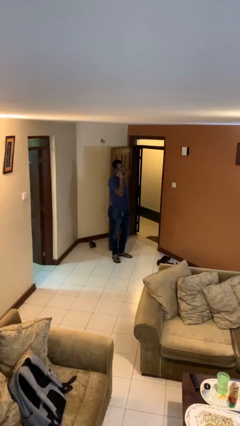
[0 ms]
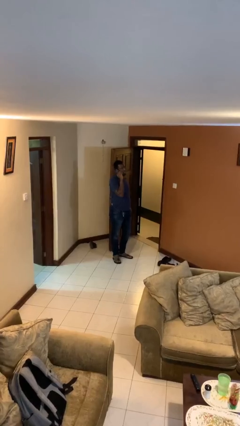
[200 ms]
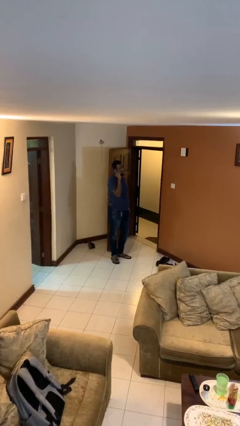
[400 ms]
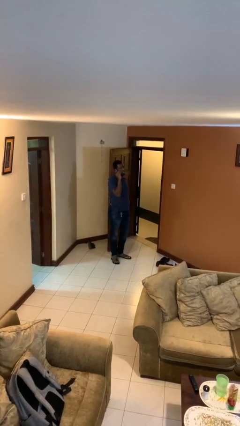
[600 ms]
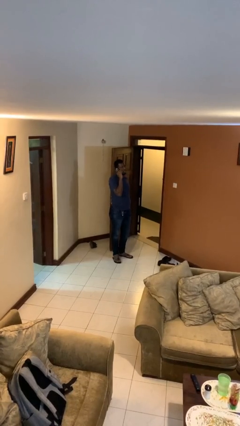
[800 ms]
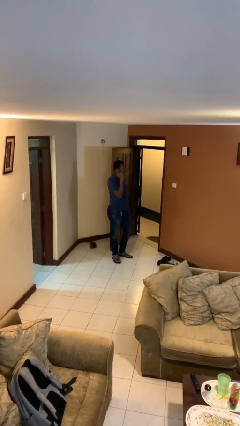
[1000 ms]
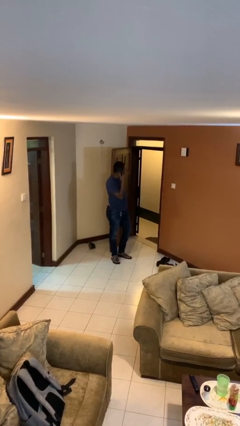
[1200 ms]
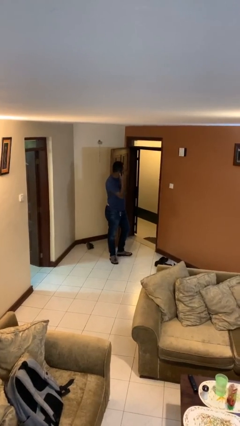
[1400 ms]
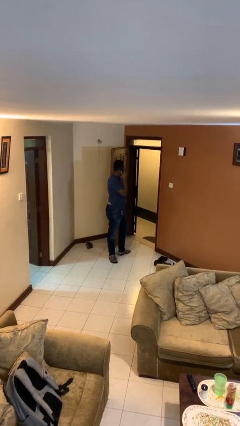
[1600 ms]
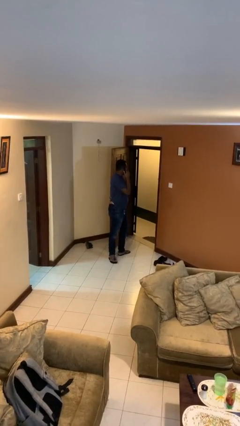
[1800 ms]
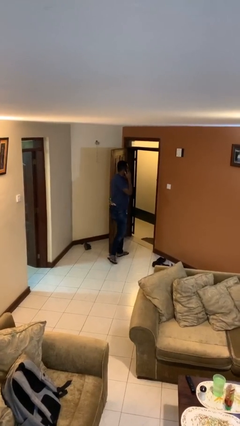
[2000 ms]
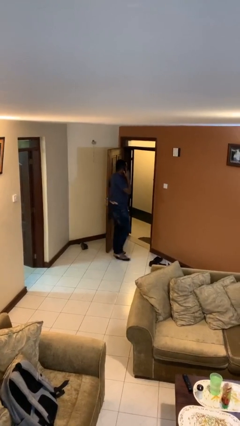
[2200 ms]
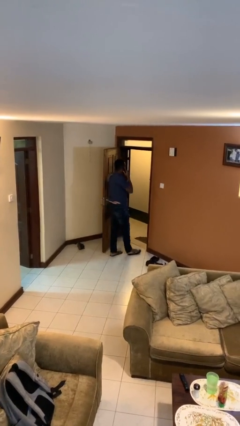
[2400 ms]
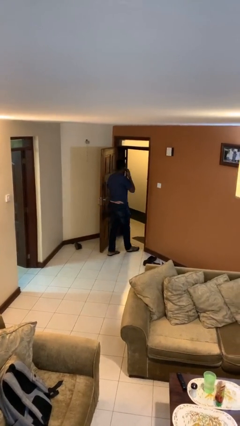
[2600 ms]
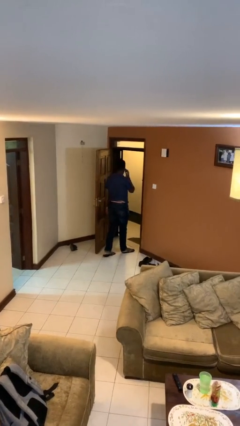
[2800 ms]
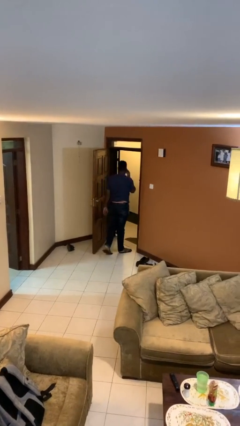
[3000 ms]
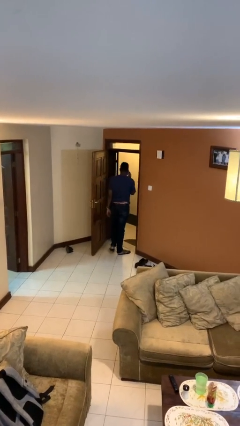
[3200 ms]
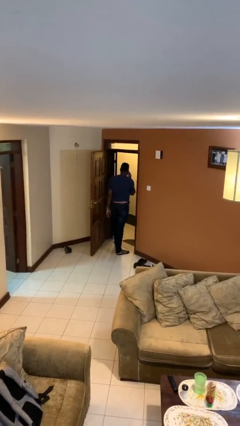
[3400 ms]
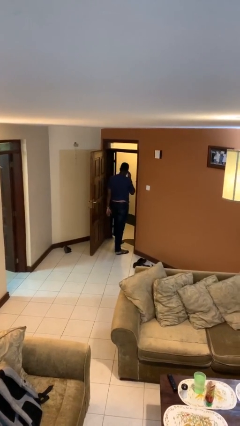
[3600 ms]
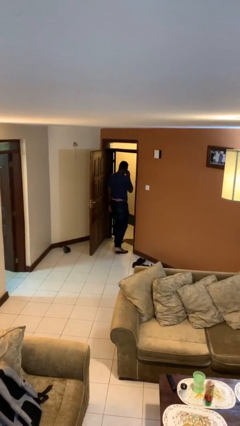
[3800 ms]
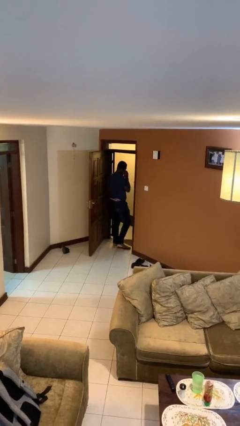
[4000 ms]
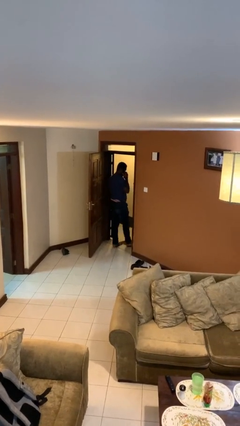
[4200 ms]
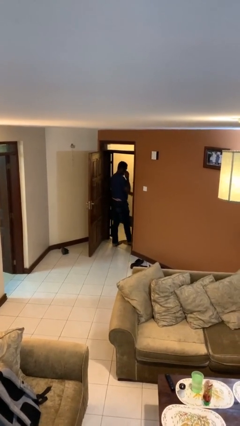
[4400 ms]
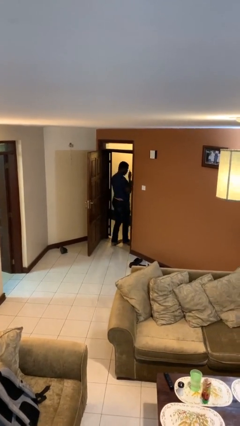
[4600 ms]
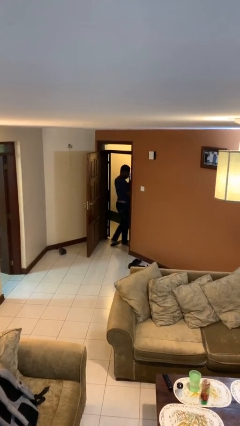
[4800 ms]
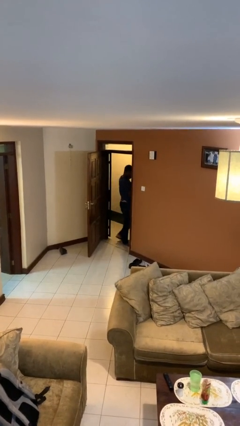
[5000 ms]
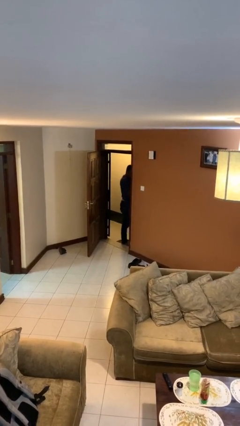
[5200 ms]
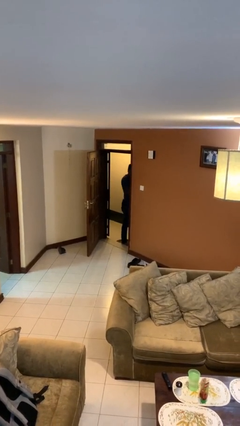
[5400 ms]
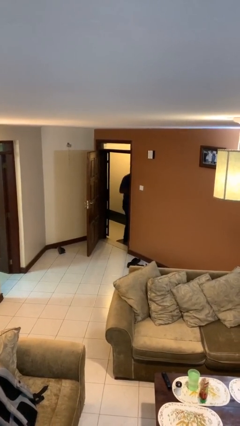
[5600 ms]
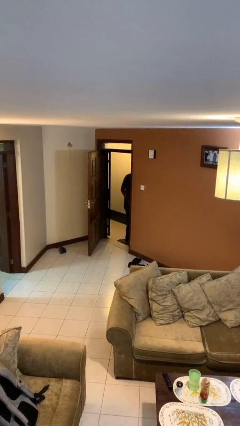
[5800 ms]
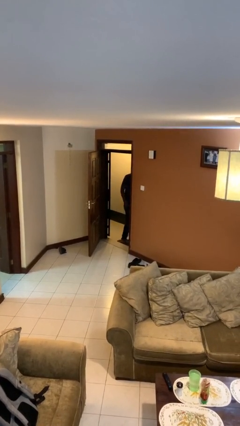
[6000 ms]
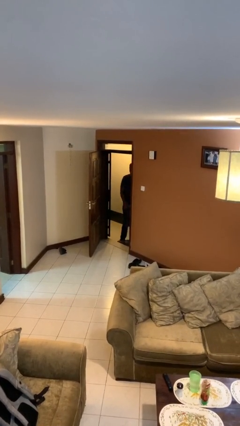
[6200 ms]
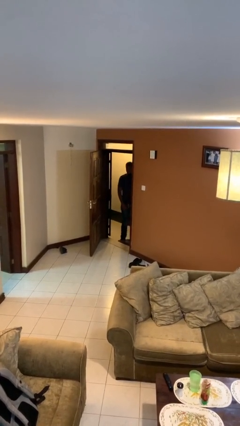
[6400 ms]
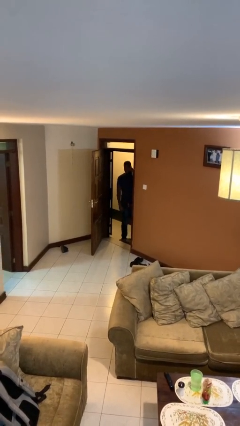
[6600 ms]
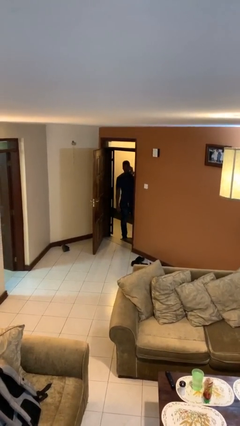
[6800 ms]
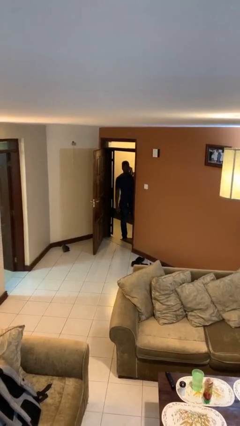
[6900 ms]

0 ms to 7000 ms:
person exits scene through structure

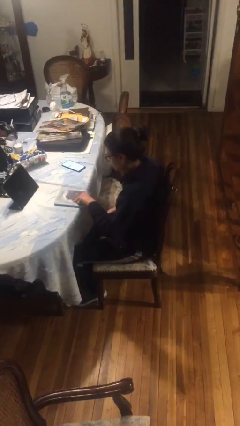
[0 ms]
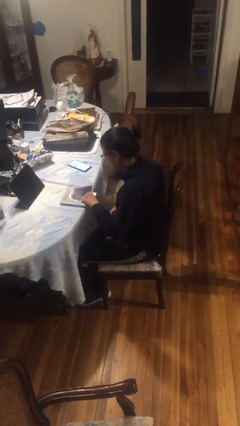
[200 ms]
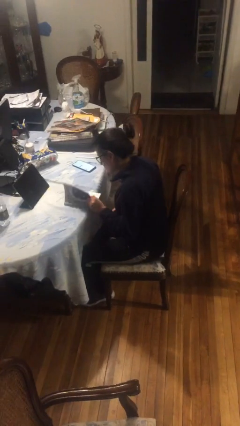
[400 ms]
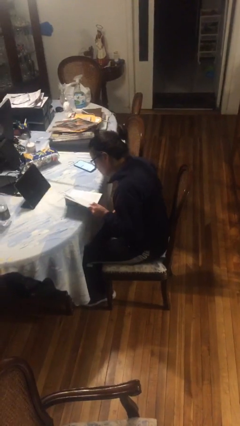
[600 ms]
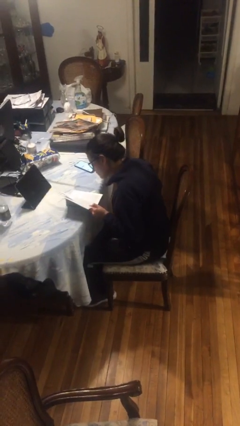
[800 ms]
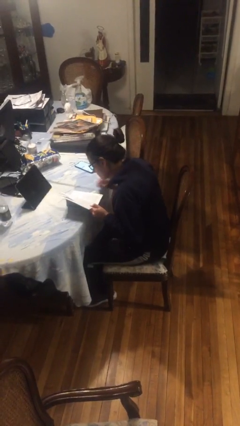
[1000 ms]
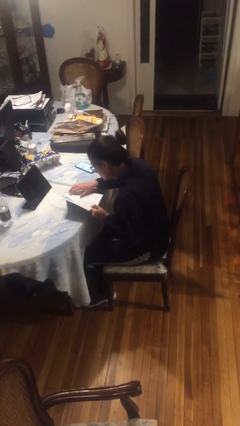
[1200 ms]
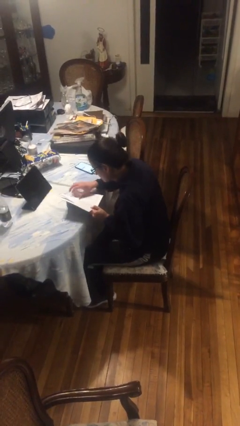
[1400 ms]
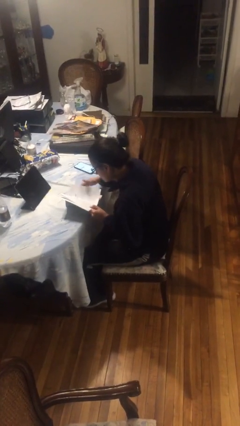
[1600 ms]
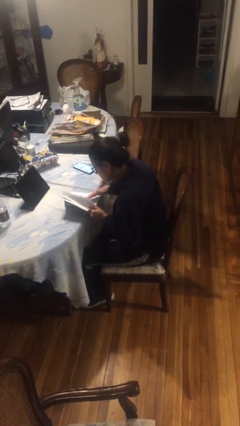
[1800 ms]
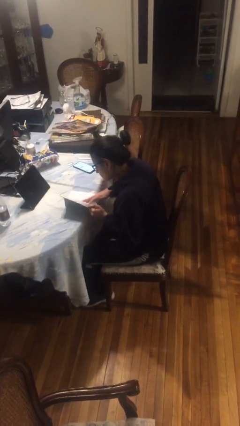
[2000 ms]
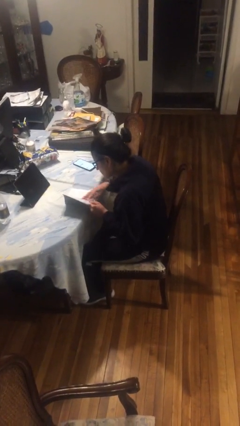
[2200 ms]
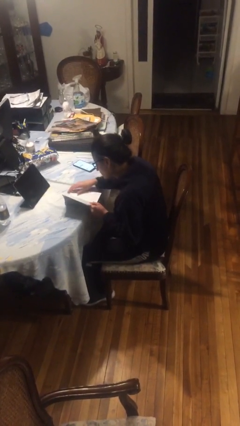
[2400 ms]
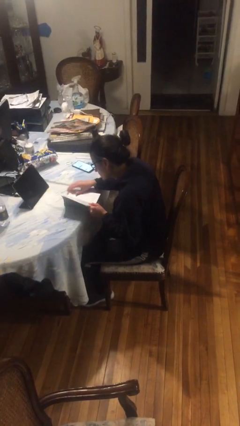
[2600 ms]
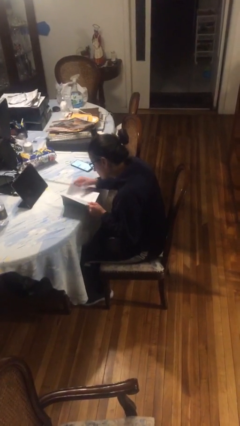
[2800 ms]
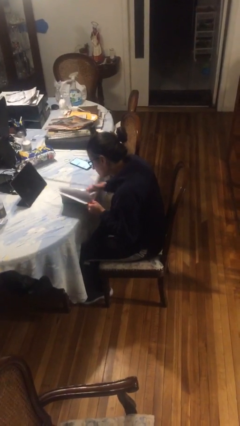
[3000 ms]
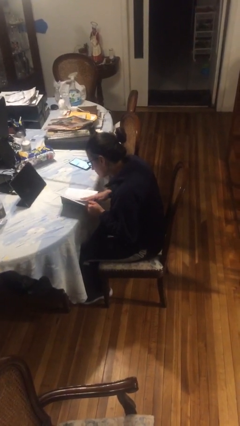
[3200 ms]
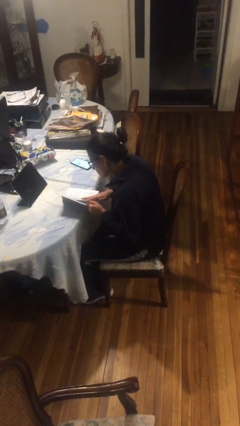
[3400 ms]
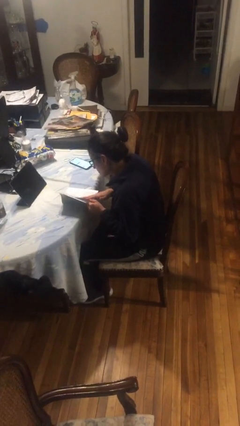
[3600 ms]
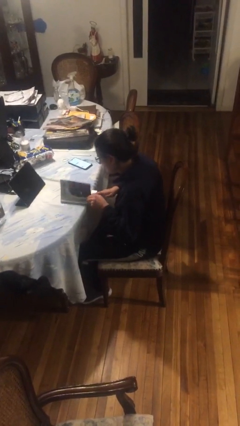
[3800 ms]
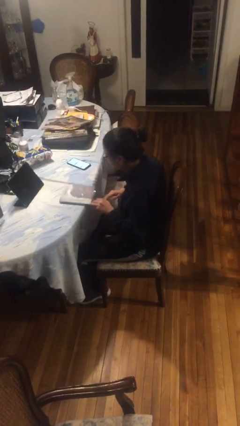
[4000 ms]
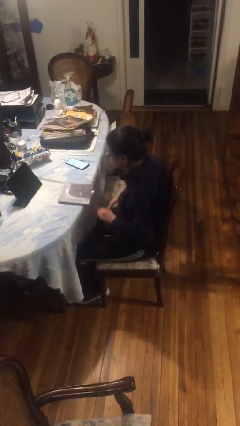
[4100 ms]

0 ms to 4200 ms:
person reads book

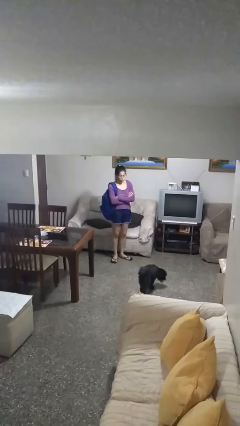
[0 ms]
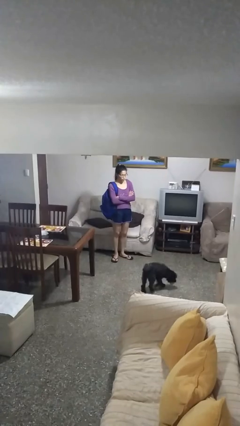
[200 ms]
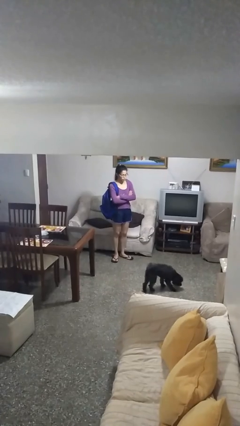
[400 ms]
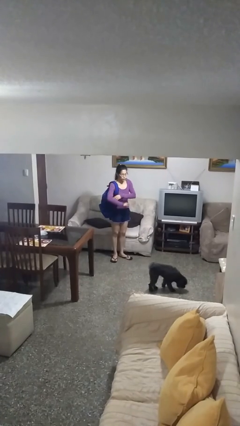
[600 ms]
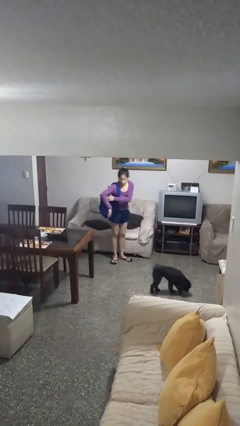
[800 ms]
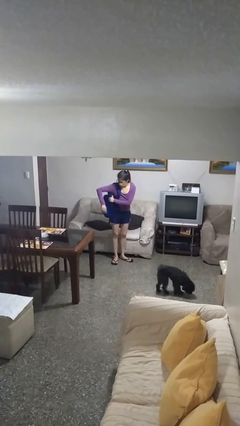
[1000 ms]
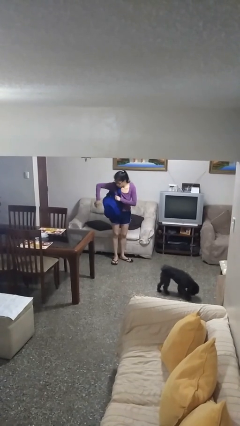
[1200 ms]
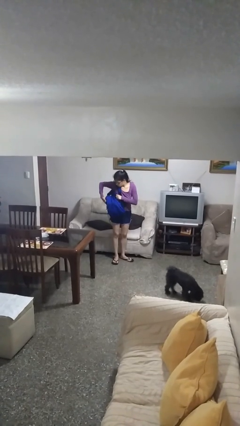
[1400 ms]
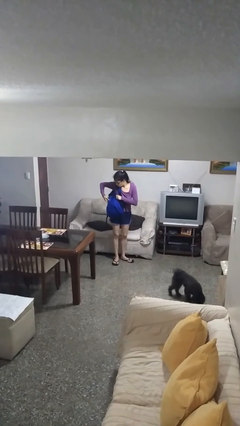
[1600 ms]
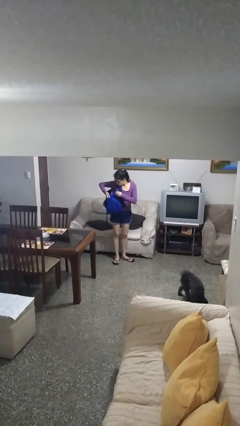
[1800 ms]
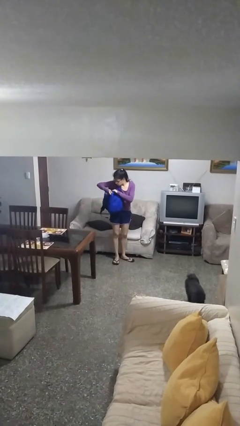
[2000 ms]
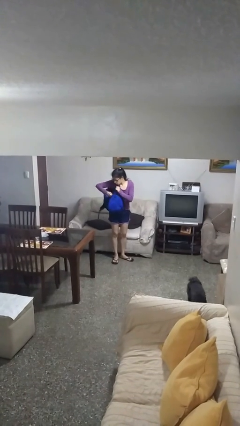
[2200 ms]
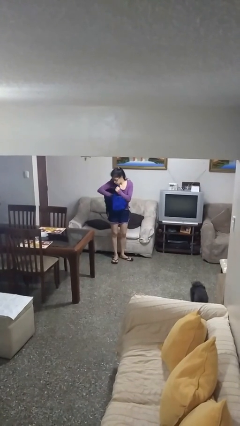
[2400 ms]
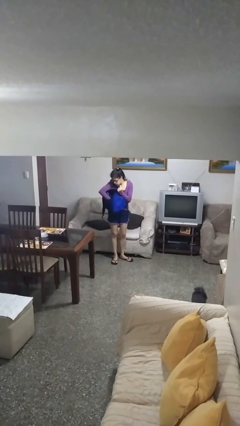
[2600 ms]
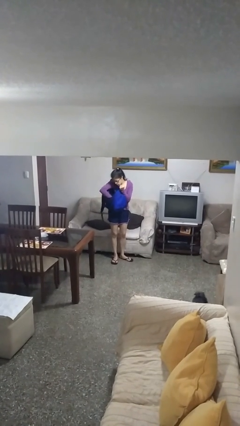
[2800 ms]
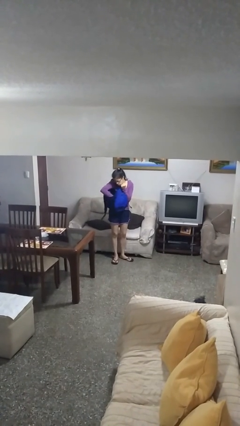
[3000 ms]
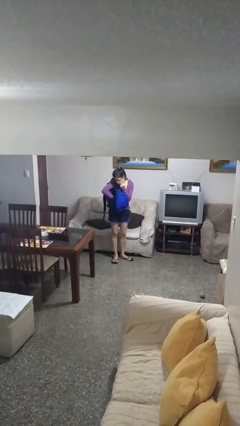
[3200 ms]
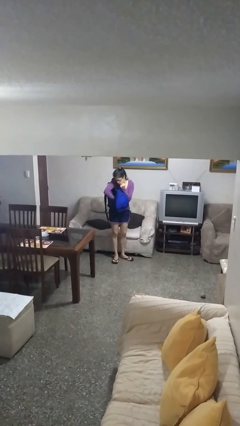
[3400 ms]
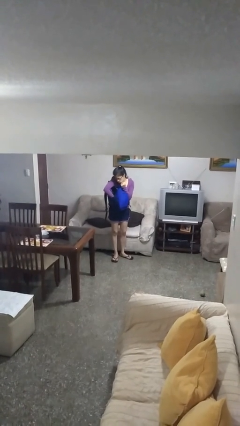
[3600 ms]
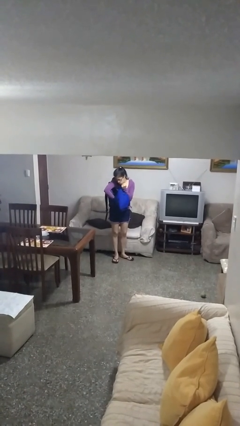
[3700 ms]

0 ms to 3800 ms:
person searches in backpack

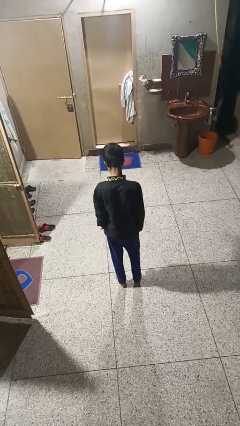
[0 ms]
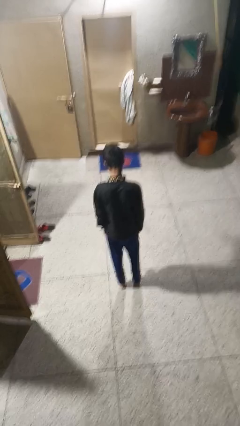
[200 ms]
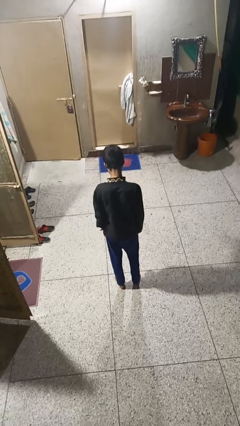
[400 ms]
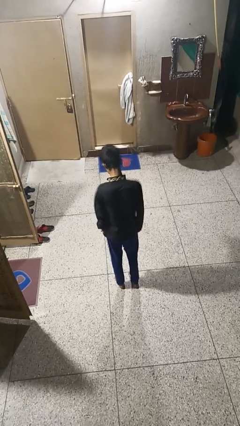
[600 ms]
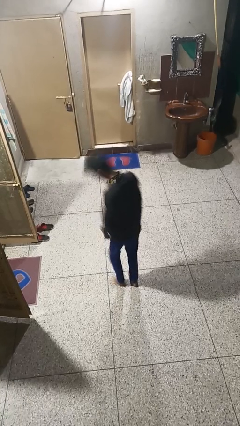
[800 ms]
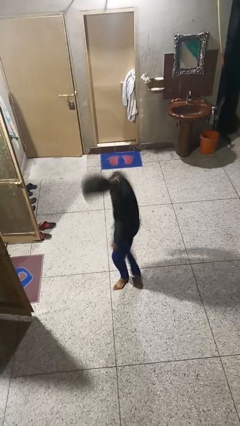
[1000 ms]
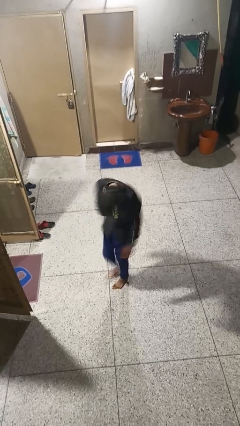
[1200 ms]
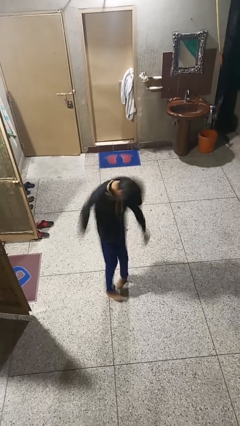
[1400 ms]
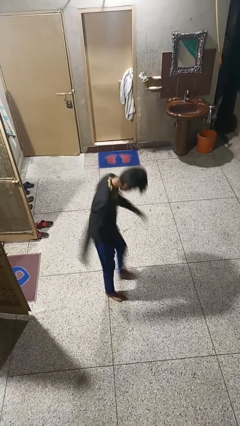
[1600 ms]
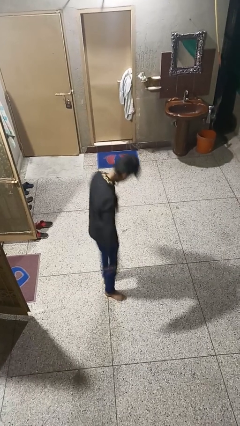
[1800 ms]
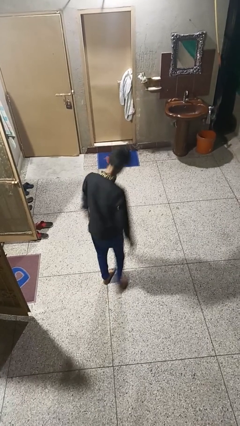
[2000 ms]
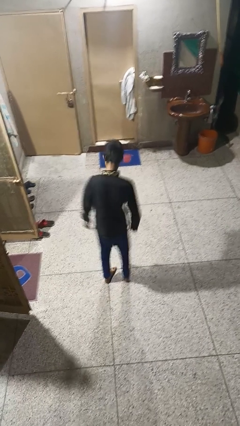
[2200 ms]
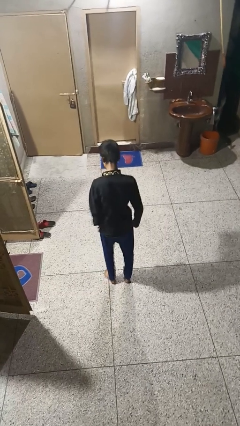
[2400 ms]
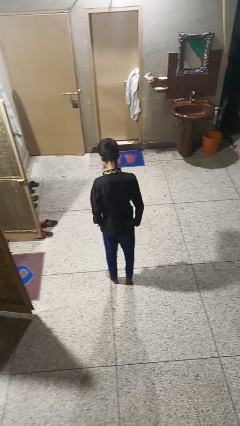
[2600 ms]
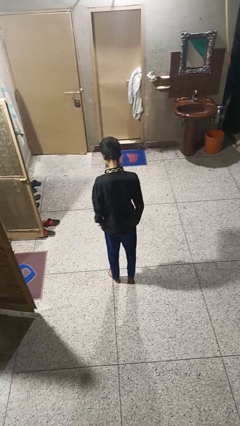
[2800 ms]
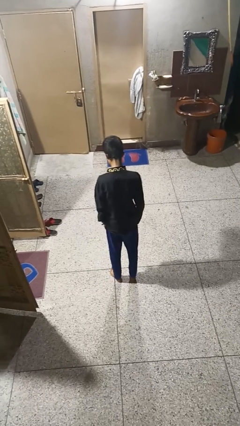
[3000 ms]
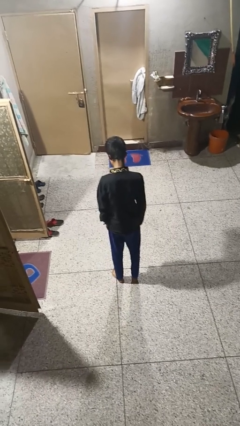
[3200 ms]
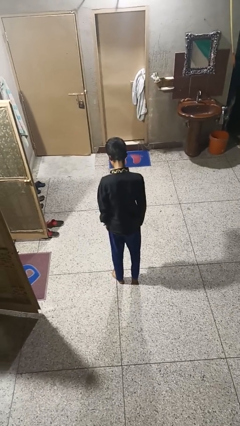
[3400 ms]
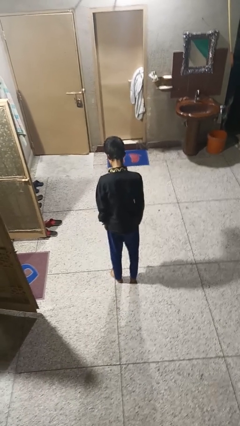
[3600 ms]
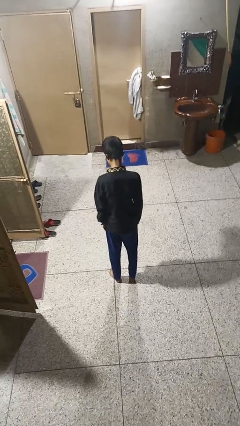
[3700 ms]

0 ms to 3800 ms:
person twirls
